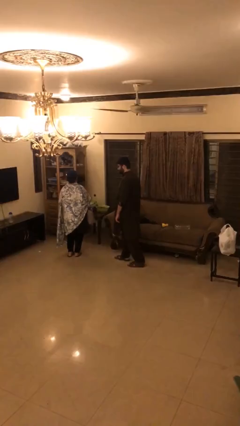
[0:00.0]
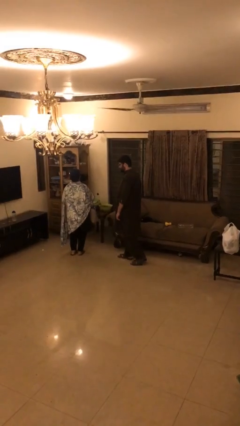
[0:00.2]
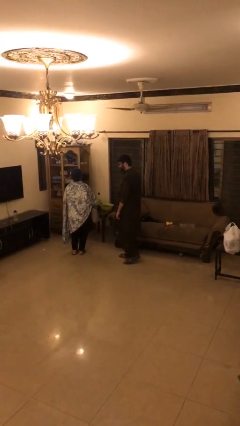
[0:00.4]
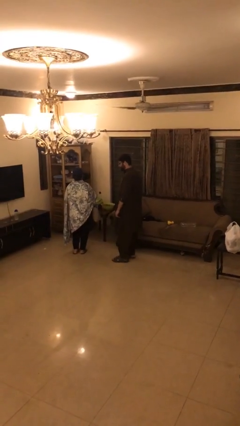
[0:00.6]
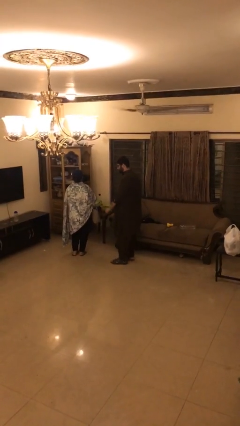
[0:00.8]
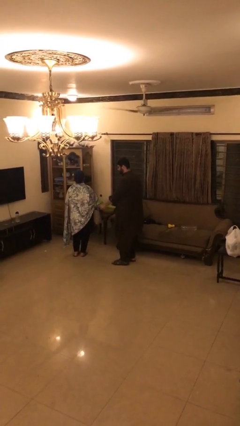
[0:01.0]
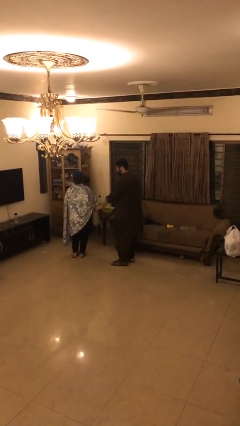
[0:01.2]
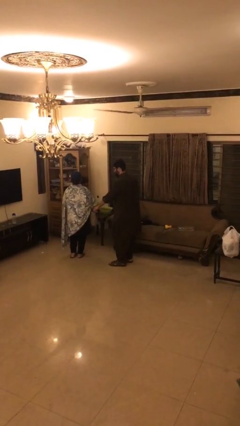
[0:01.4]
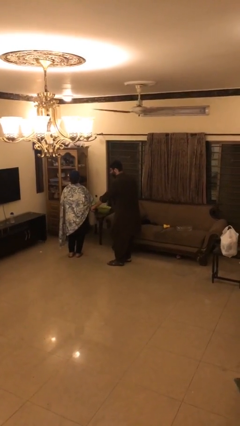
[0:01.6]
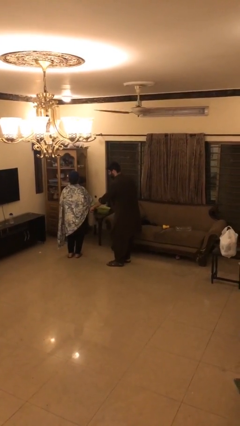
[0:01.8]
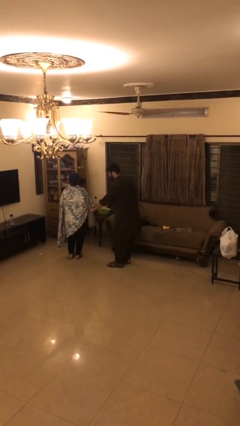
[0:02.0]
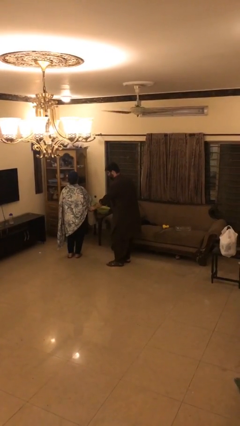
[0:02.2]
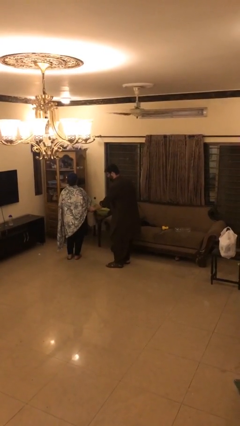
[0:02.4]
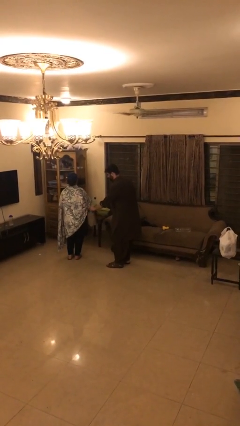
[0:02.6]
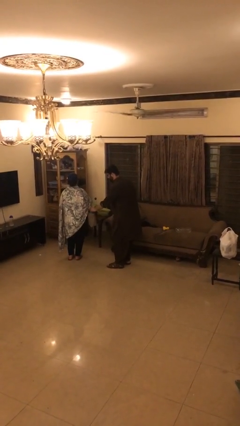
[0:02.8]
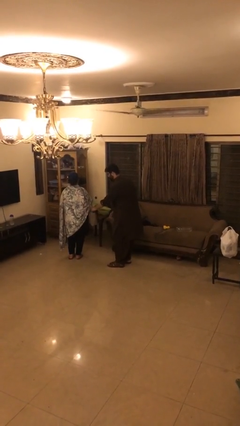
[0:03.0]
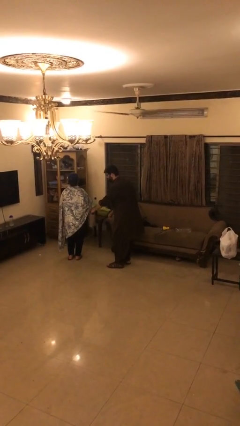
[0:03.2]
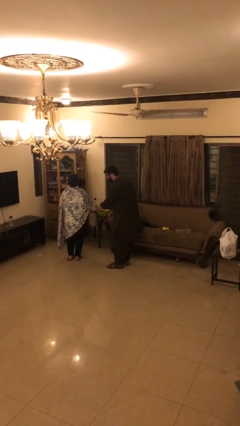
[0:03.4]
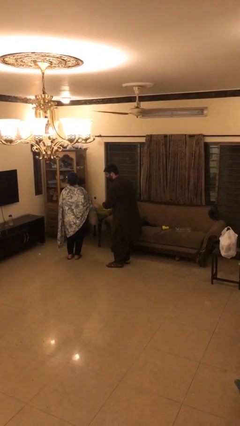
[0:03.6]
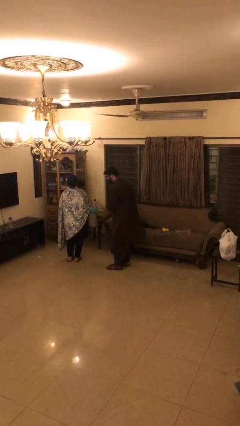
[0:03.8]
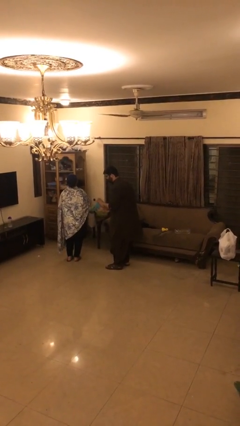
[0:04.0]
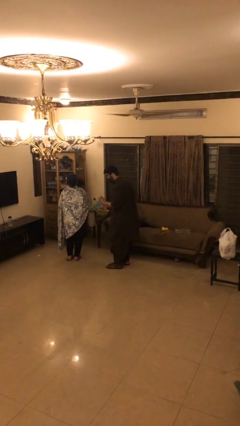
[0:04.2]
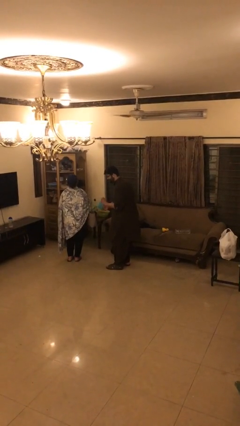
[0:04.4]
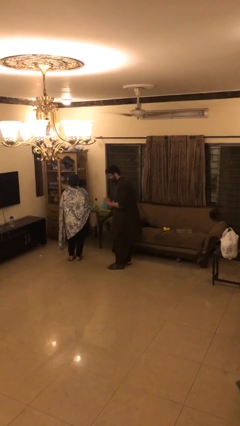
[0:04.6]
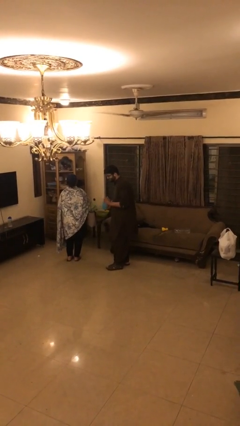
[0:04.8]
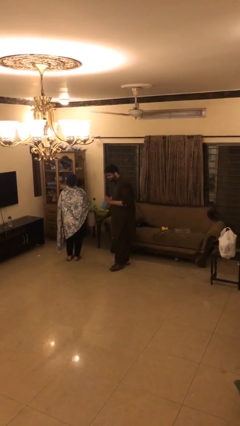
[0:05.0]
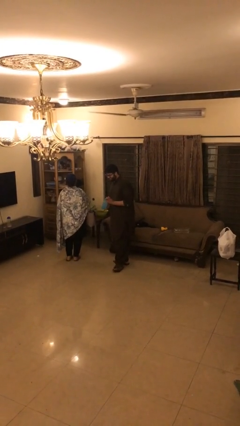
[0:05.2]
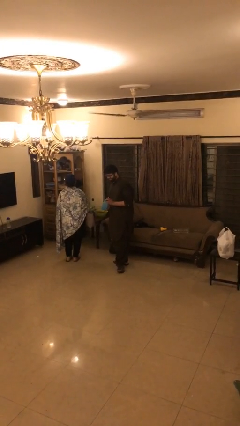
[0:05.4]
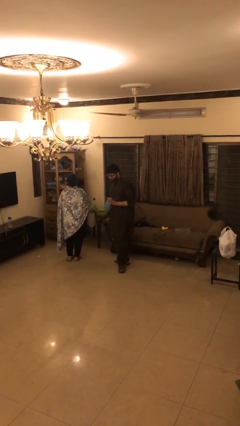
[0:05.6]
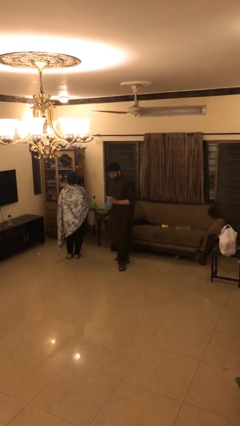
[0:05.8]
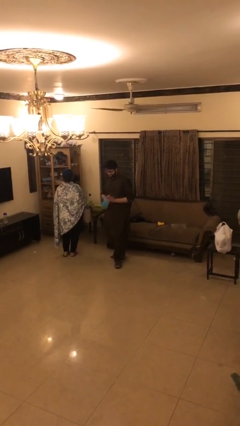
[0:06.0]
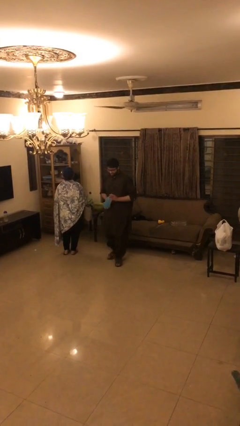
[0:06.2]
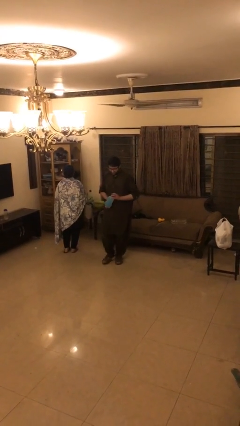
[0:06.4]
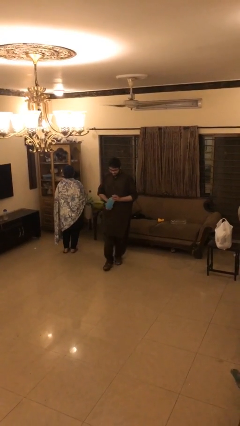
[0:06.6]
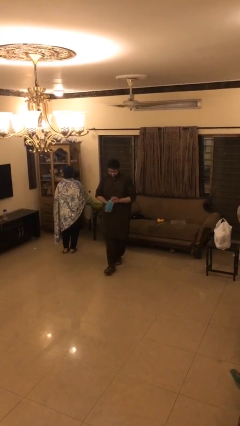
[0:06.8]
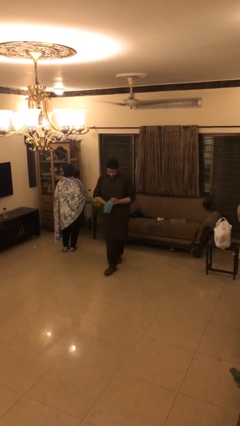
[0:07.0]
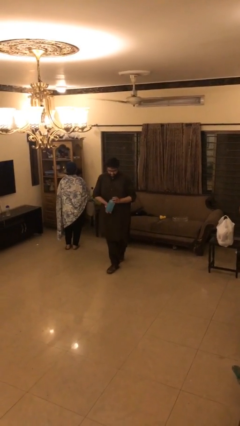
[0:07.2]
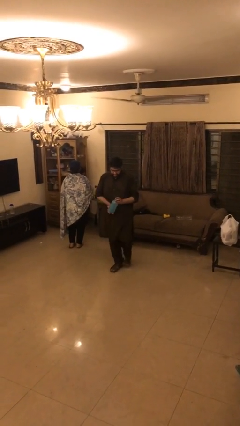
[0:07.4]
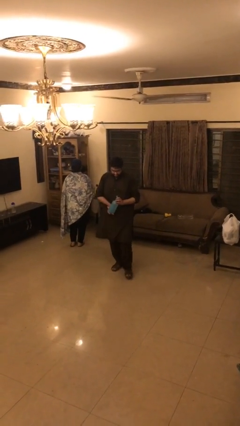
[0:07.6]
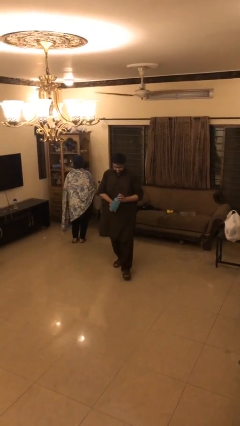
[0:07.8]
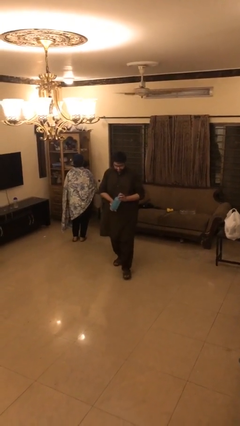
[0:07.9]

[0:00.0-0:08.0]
person steals object from person

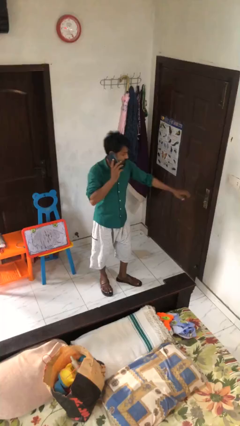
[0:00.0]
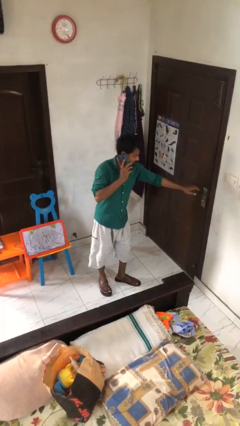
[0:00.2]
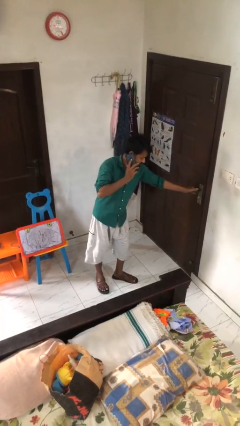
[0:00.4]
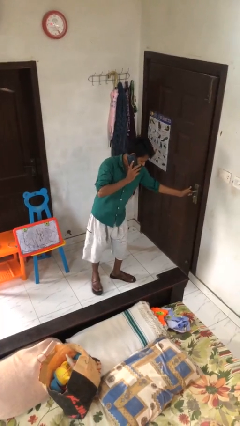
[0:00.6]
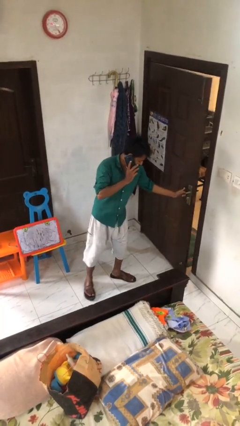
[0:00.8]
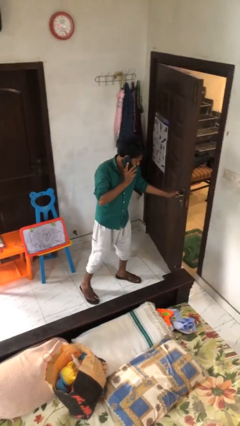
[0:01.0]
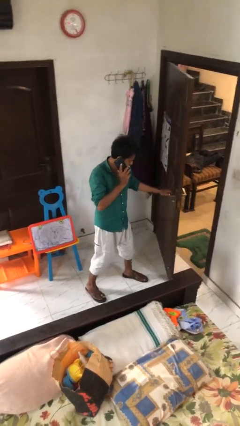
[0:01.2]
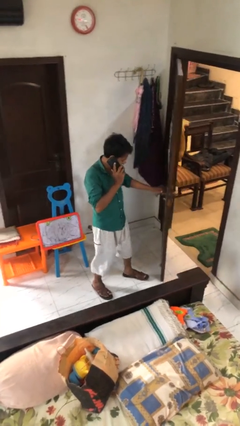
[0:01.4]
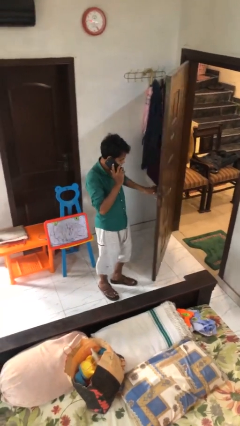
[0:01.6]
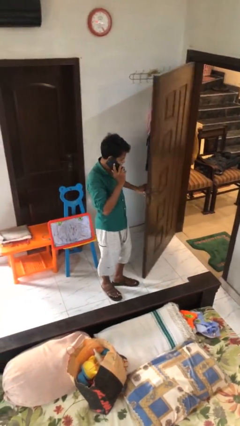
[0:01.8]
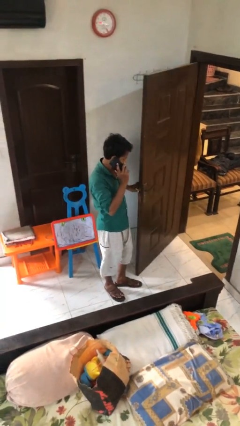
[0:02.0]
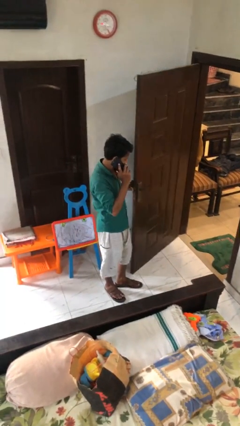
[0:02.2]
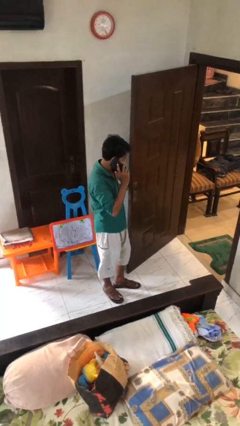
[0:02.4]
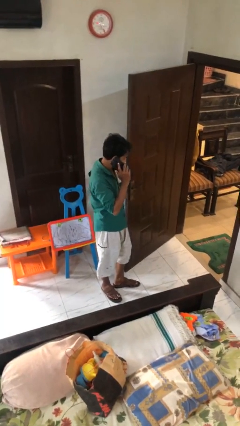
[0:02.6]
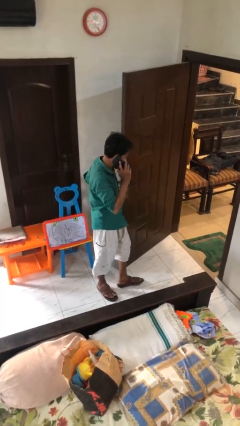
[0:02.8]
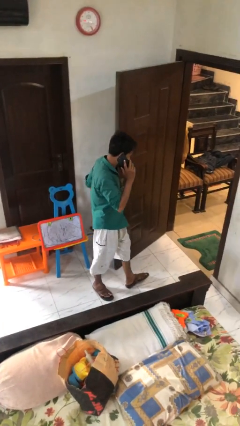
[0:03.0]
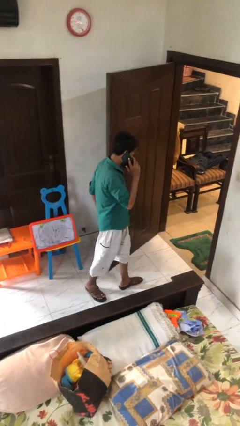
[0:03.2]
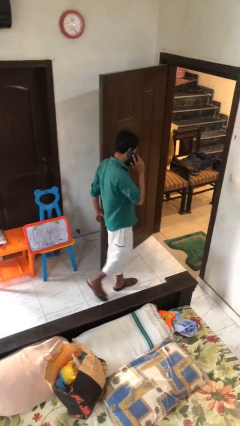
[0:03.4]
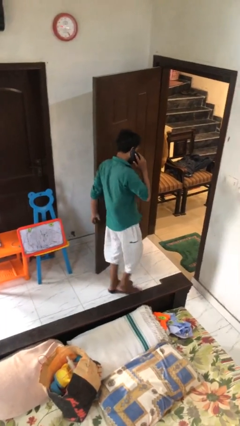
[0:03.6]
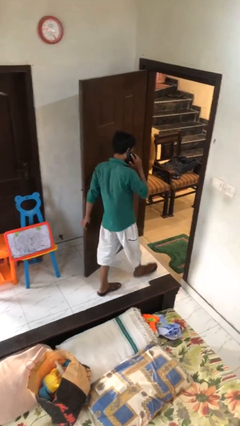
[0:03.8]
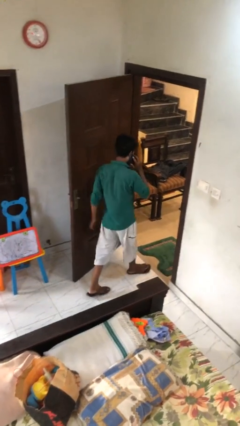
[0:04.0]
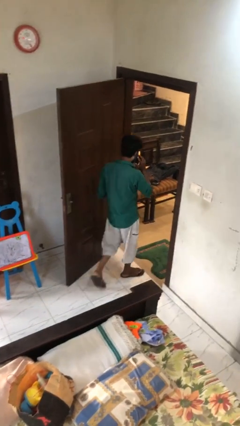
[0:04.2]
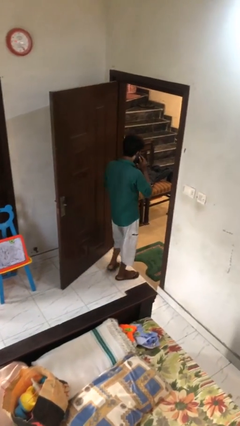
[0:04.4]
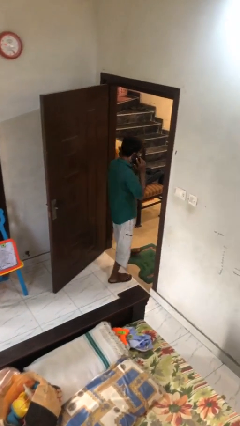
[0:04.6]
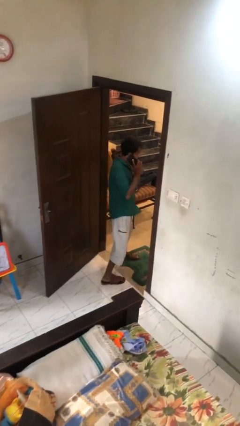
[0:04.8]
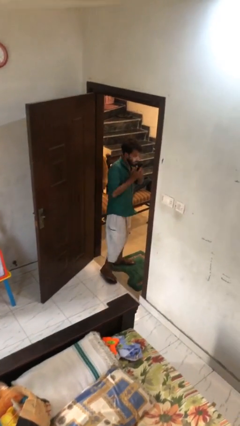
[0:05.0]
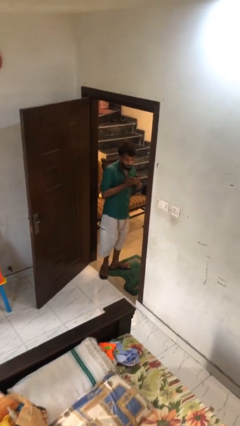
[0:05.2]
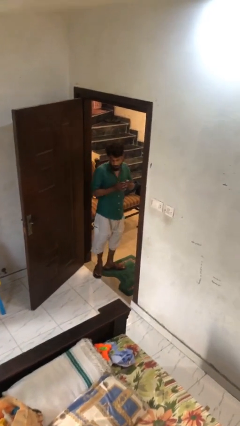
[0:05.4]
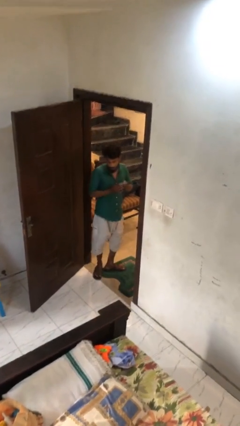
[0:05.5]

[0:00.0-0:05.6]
person opens facility door

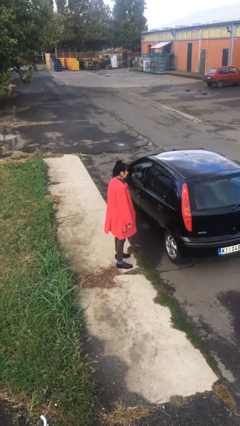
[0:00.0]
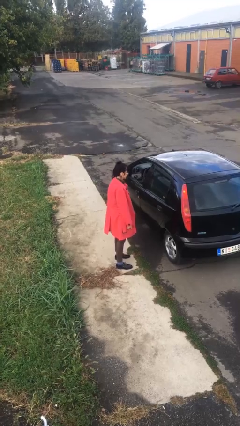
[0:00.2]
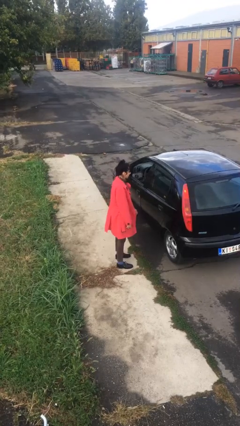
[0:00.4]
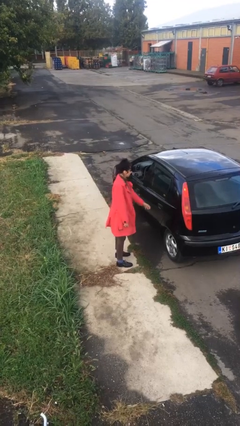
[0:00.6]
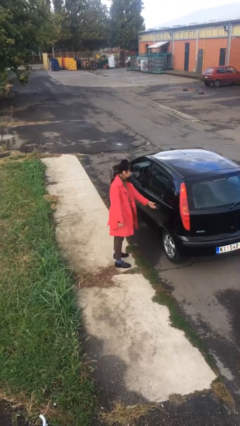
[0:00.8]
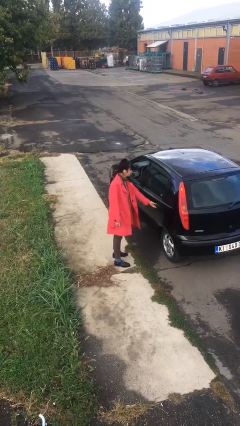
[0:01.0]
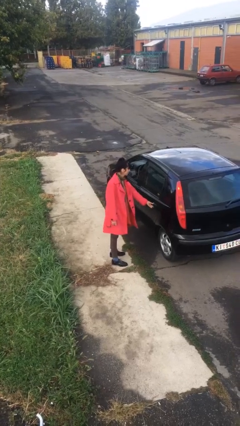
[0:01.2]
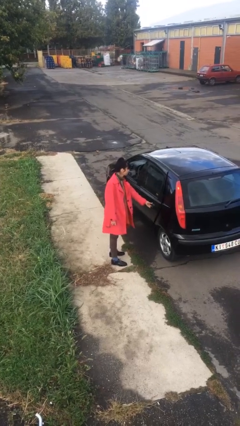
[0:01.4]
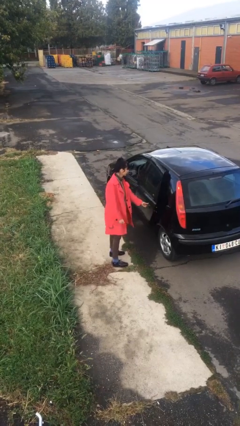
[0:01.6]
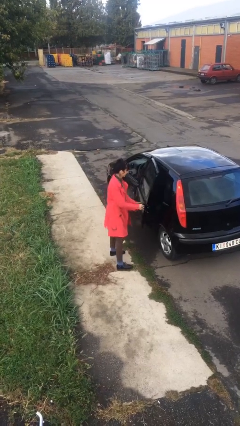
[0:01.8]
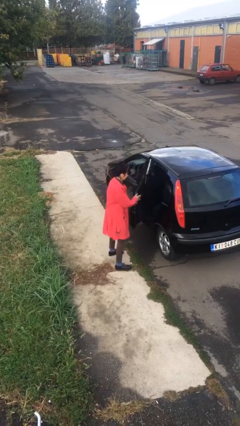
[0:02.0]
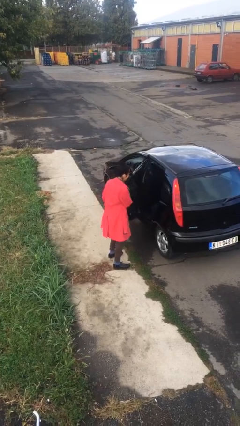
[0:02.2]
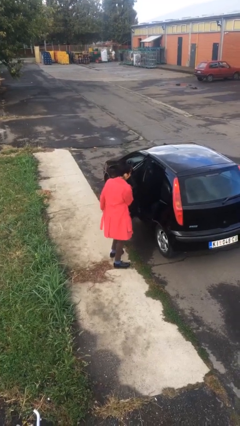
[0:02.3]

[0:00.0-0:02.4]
person opens car door

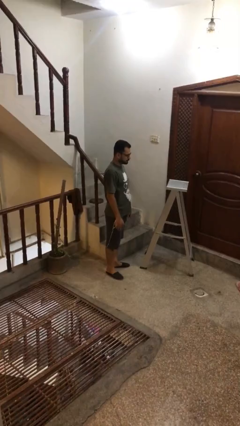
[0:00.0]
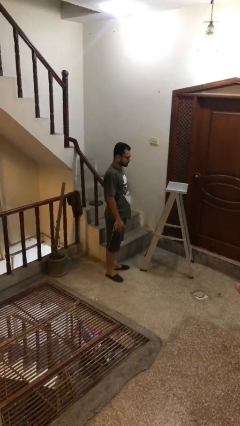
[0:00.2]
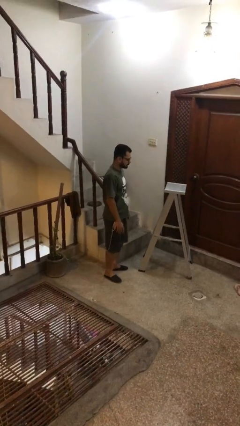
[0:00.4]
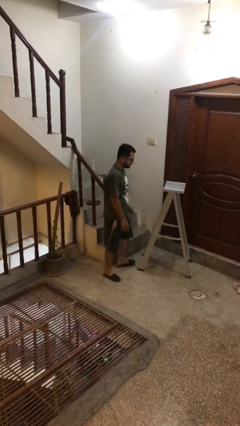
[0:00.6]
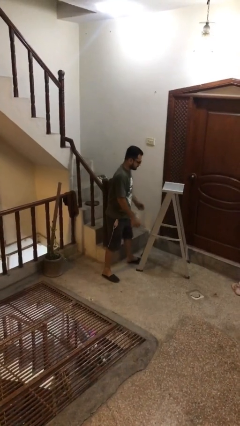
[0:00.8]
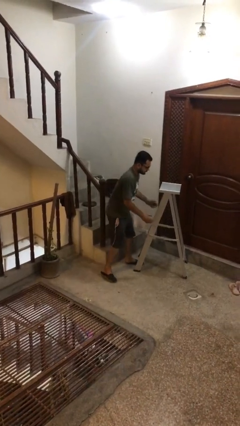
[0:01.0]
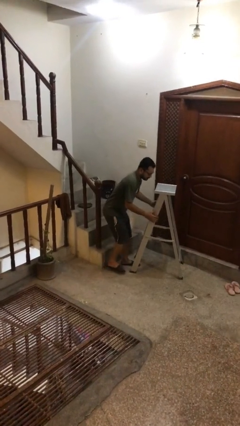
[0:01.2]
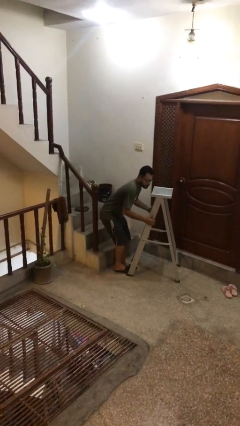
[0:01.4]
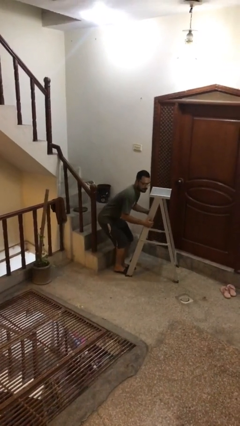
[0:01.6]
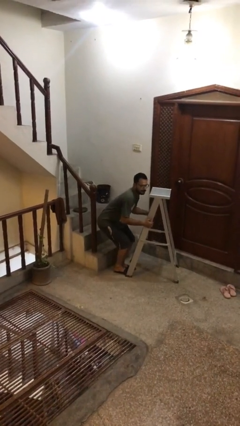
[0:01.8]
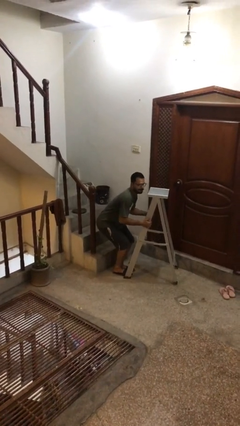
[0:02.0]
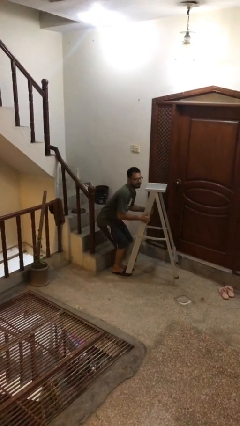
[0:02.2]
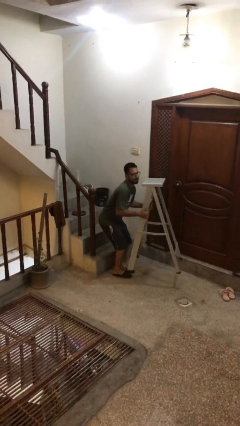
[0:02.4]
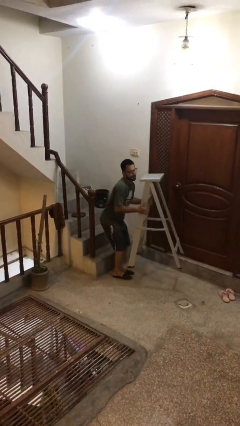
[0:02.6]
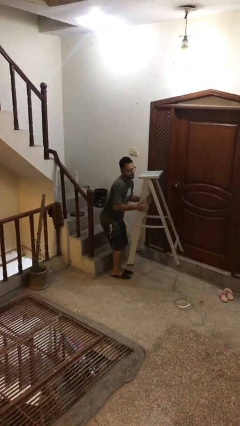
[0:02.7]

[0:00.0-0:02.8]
person picks up object from floor
